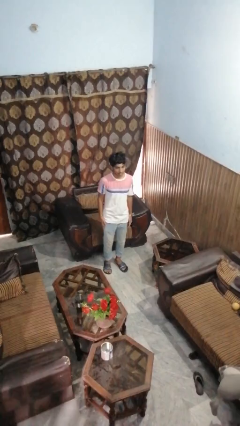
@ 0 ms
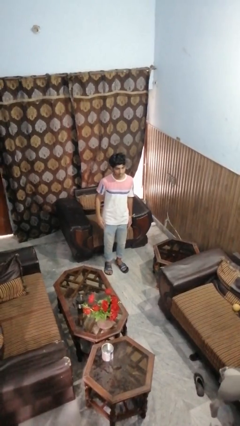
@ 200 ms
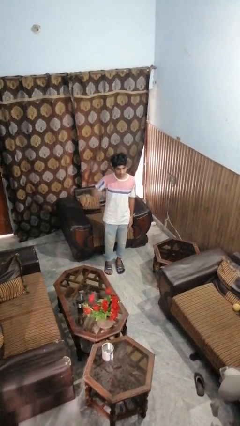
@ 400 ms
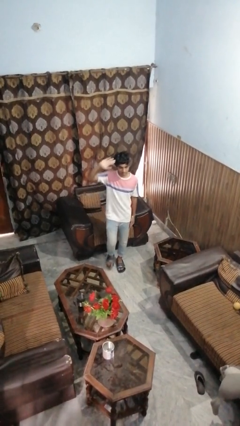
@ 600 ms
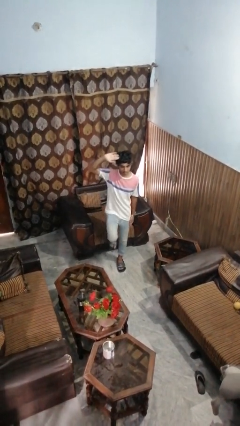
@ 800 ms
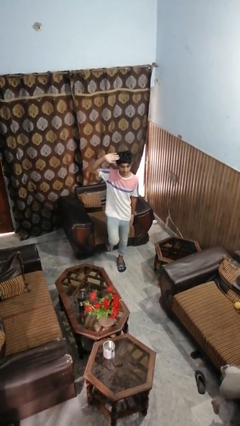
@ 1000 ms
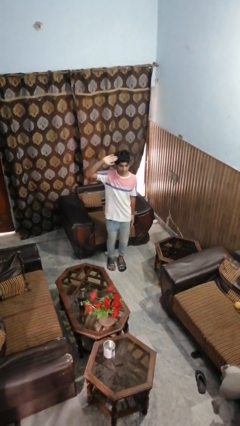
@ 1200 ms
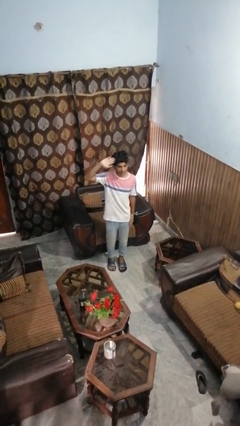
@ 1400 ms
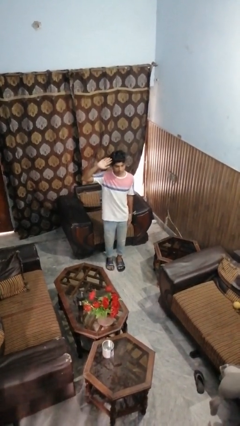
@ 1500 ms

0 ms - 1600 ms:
person salutes

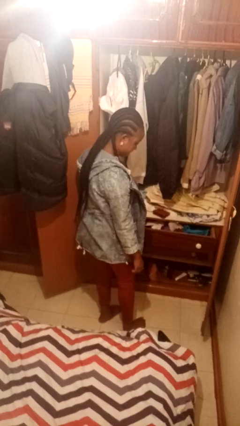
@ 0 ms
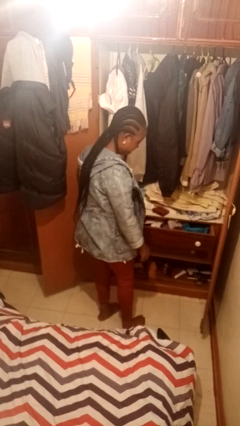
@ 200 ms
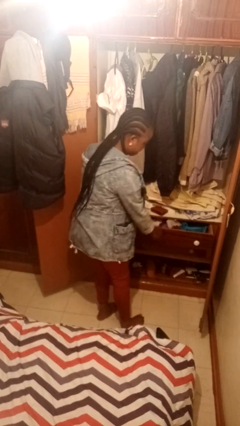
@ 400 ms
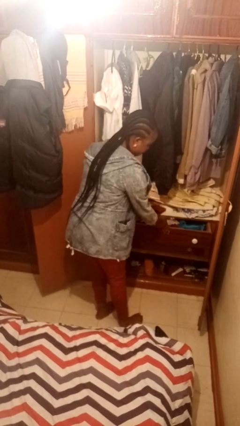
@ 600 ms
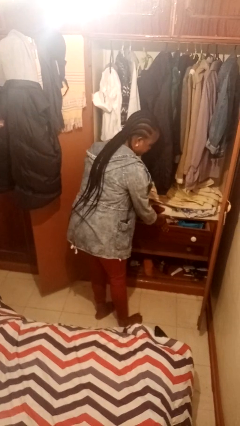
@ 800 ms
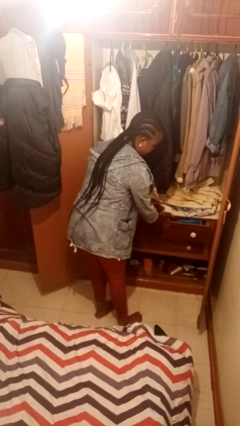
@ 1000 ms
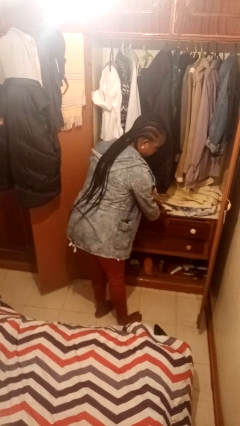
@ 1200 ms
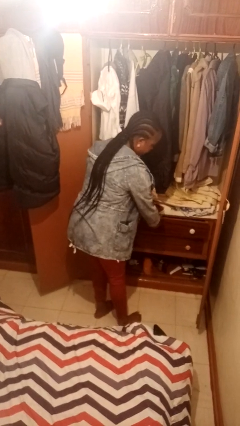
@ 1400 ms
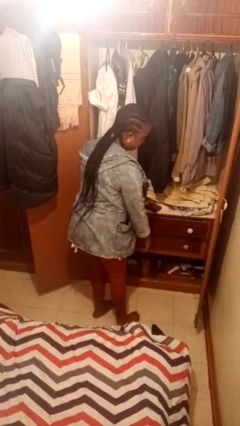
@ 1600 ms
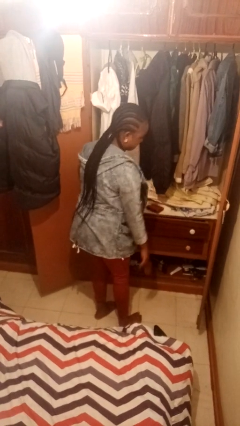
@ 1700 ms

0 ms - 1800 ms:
person closes dresser drawer

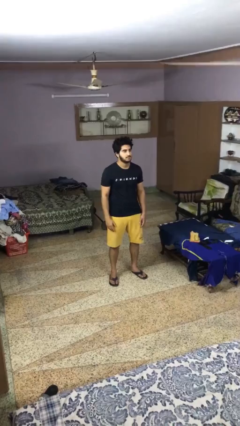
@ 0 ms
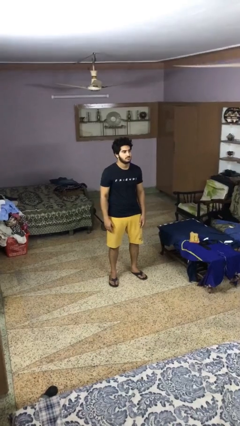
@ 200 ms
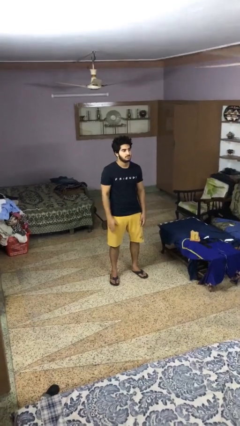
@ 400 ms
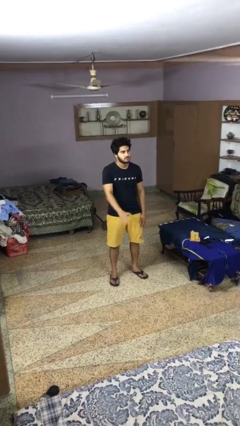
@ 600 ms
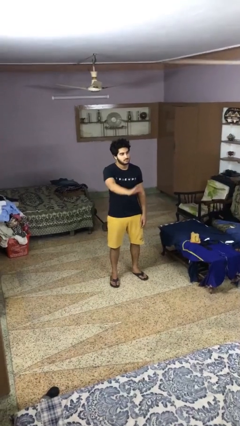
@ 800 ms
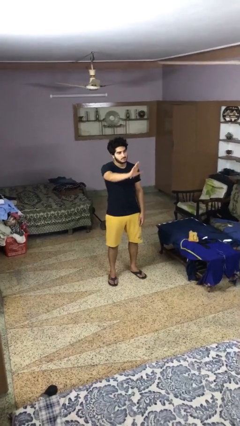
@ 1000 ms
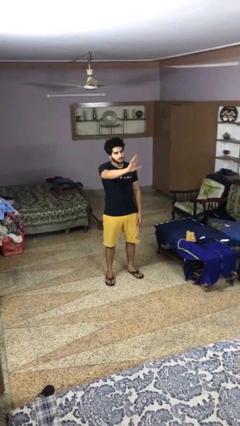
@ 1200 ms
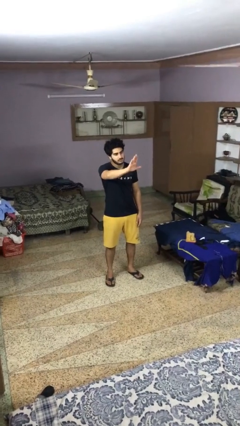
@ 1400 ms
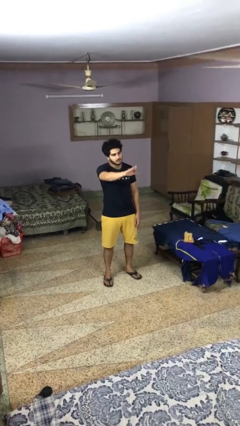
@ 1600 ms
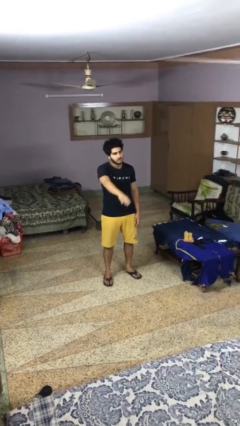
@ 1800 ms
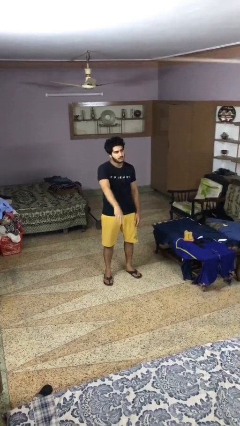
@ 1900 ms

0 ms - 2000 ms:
person gestures stop

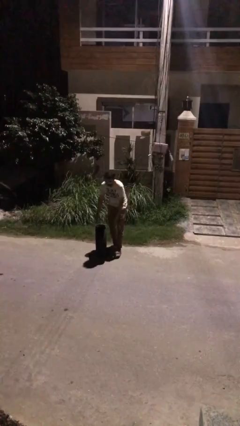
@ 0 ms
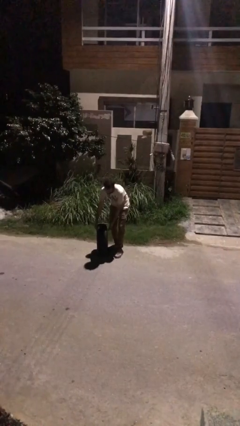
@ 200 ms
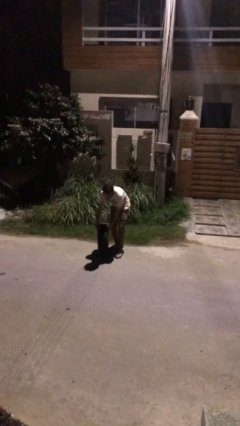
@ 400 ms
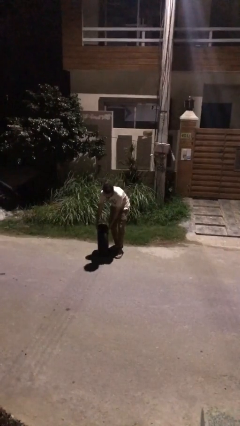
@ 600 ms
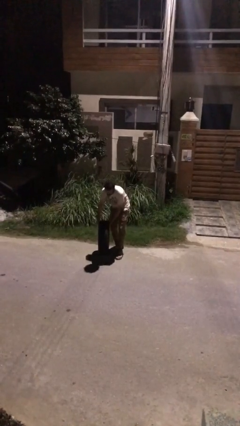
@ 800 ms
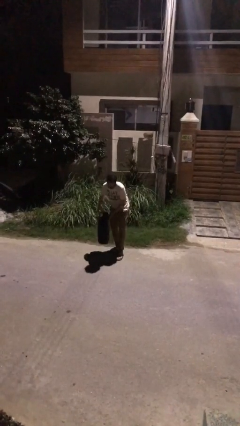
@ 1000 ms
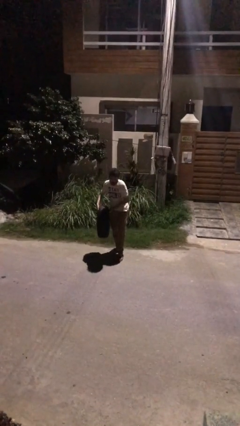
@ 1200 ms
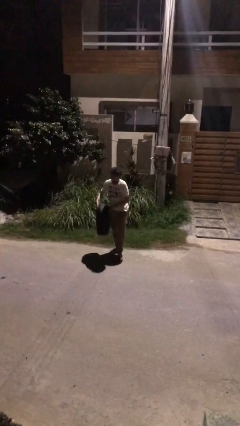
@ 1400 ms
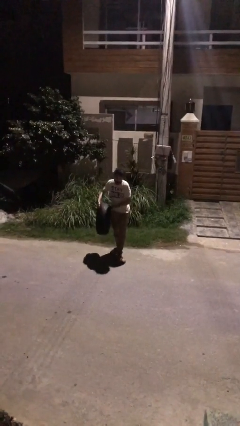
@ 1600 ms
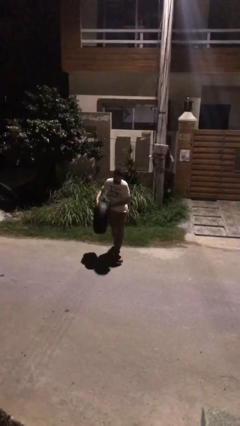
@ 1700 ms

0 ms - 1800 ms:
person picks up object from floor

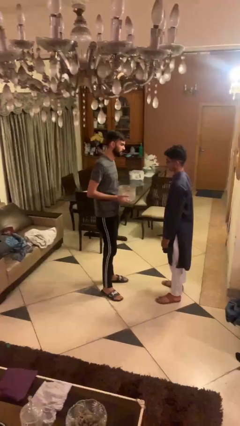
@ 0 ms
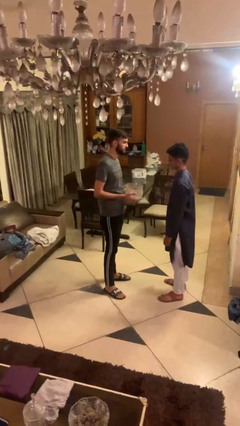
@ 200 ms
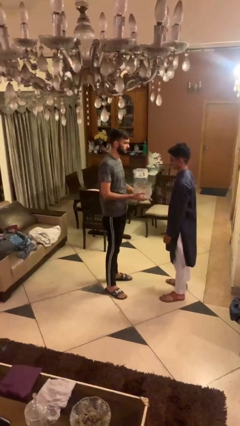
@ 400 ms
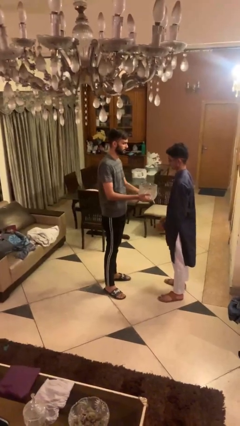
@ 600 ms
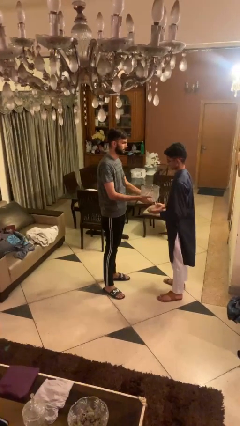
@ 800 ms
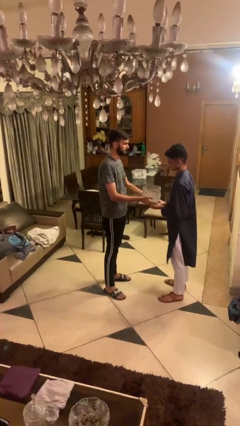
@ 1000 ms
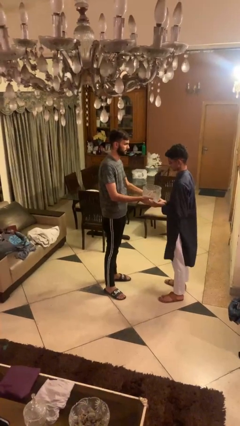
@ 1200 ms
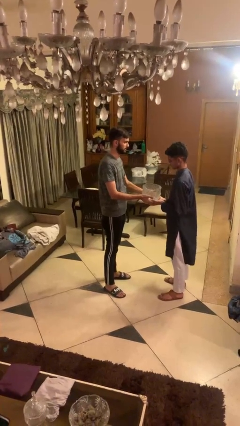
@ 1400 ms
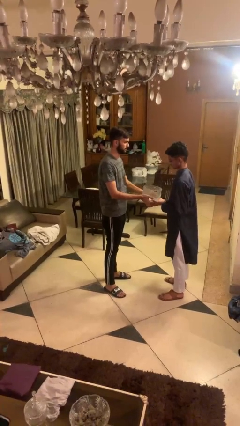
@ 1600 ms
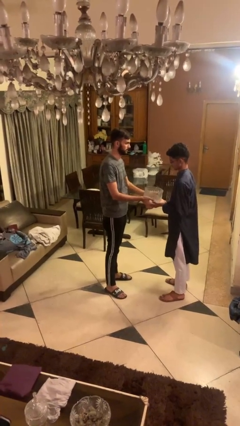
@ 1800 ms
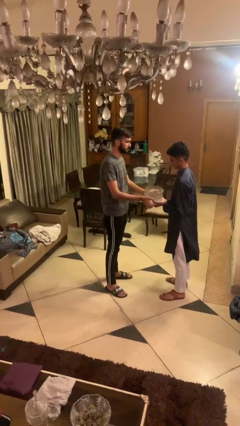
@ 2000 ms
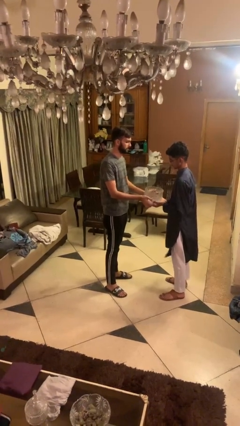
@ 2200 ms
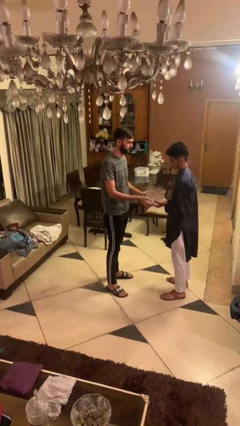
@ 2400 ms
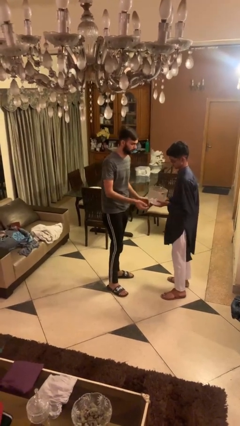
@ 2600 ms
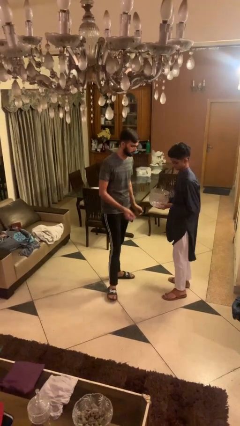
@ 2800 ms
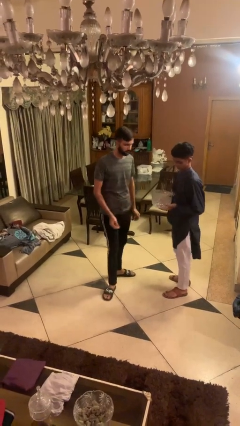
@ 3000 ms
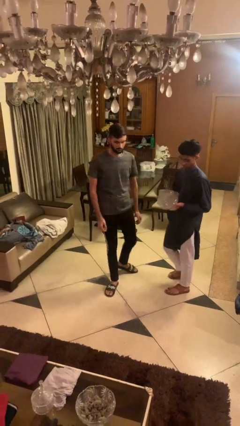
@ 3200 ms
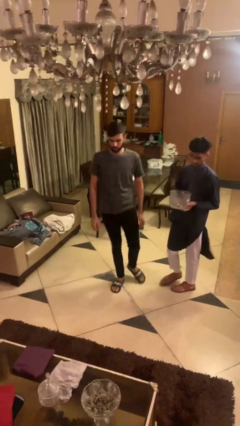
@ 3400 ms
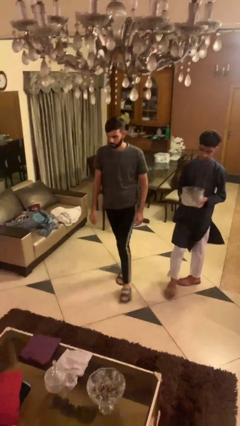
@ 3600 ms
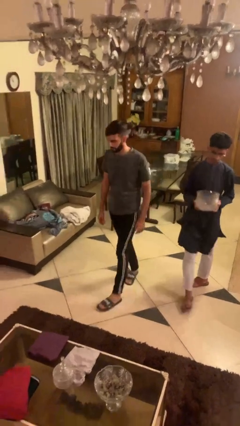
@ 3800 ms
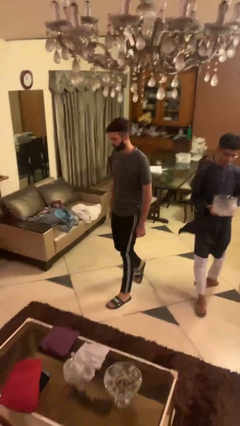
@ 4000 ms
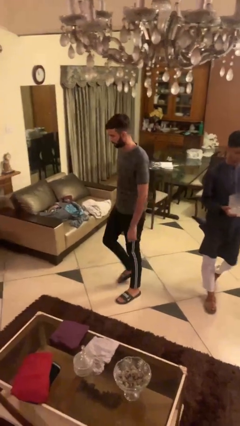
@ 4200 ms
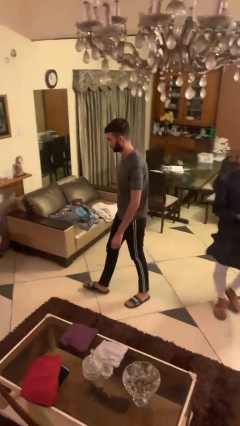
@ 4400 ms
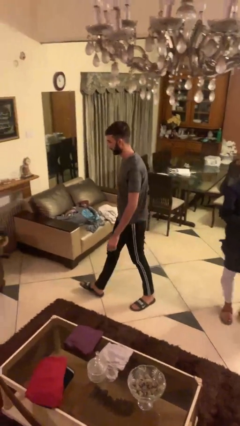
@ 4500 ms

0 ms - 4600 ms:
person transfers object to person

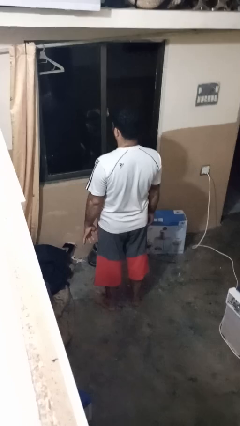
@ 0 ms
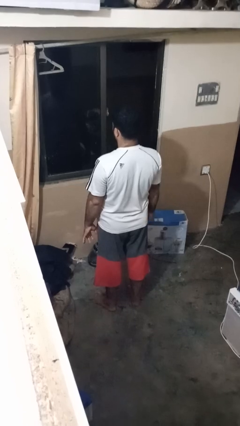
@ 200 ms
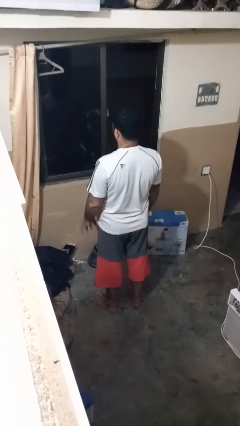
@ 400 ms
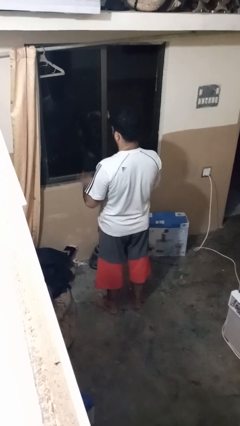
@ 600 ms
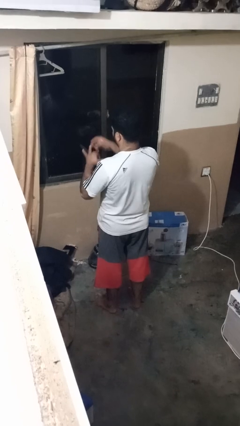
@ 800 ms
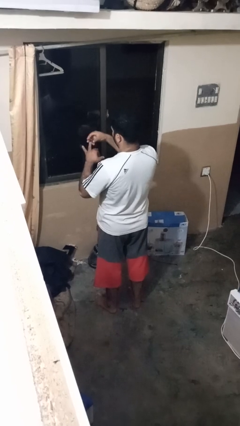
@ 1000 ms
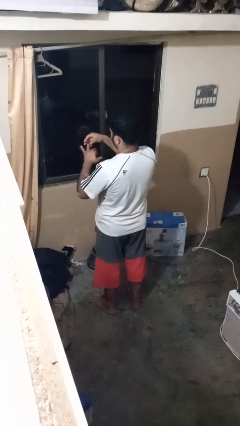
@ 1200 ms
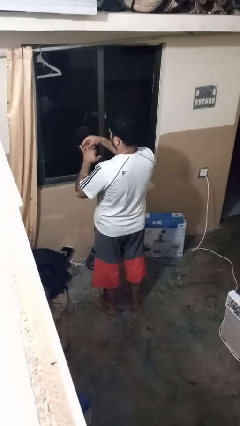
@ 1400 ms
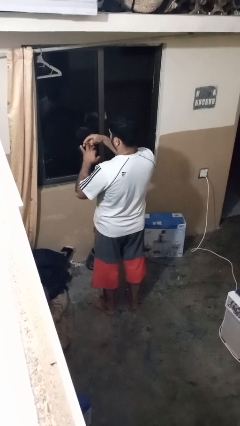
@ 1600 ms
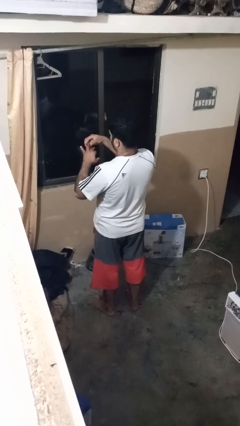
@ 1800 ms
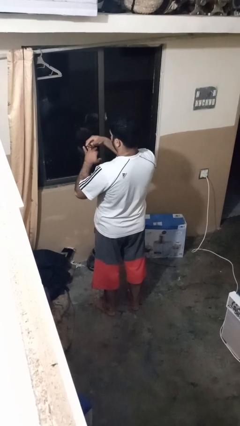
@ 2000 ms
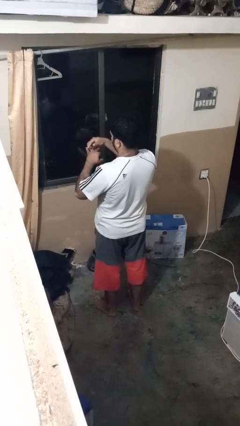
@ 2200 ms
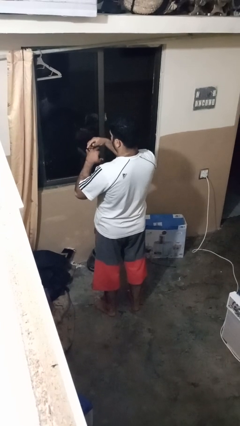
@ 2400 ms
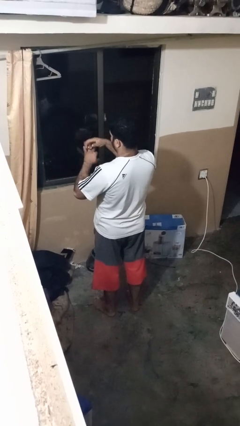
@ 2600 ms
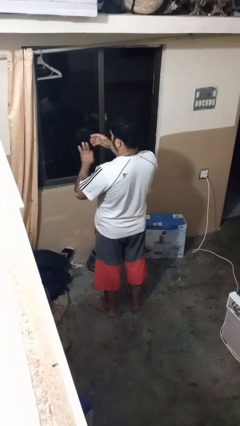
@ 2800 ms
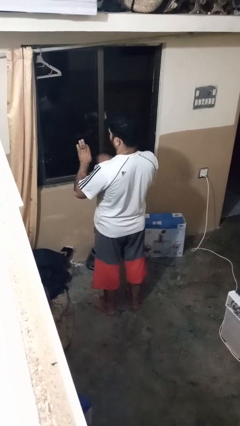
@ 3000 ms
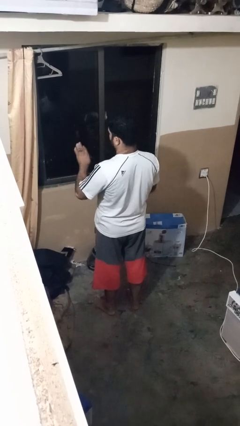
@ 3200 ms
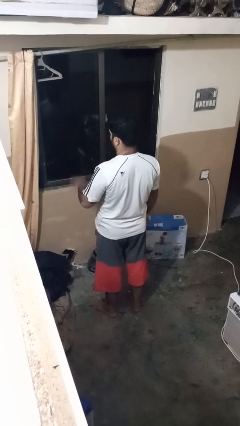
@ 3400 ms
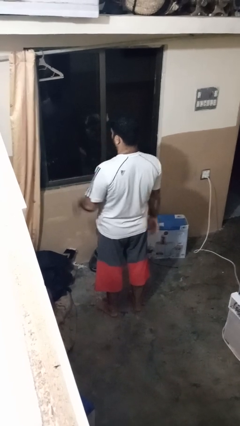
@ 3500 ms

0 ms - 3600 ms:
person puts on ring

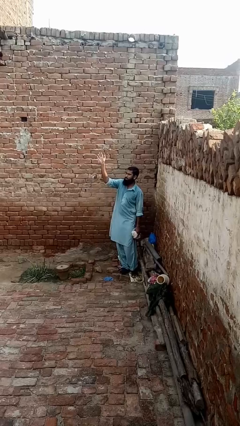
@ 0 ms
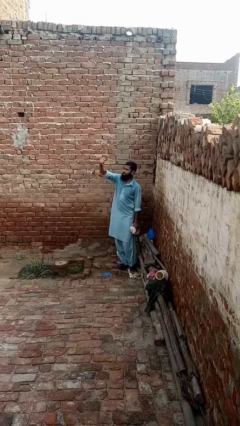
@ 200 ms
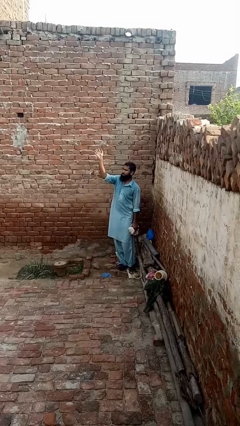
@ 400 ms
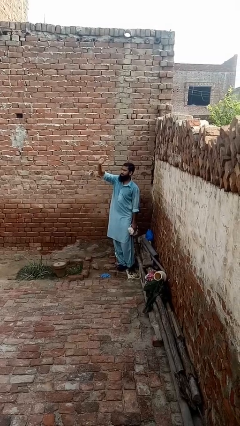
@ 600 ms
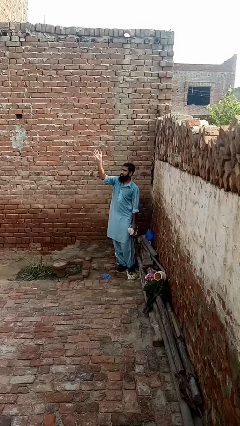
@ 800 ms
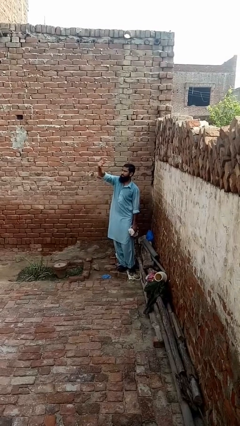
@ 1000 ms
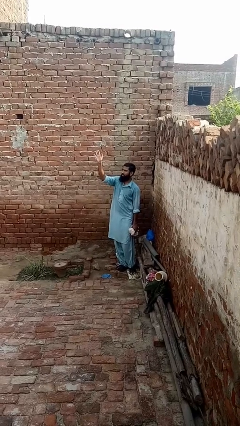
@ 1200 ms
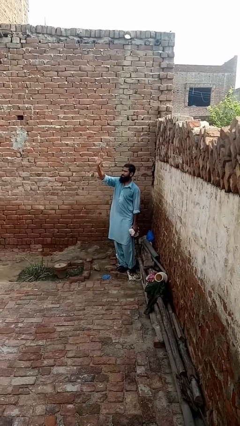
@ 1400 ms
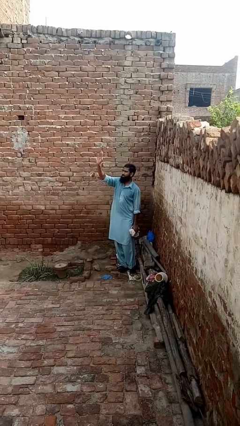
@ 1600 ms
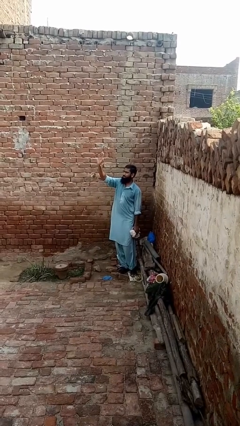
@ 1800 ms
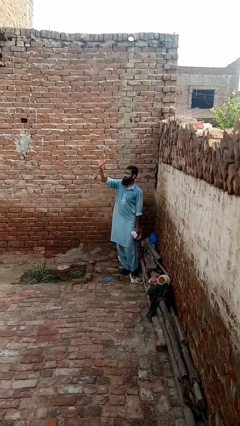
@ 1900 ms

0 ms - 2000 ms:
person waves at person
